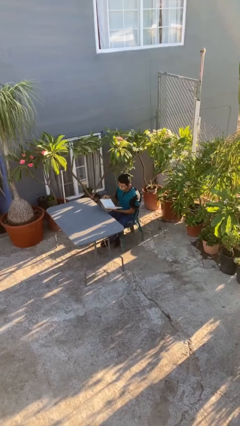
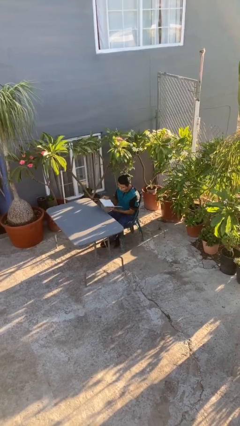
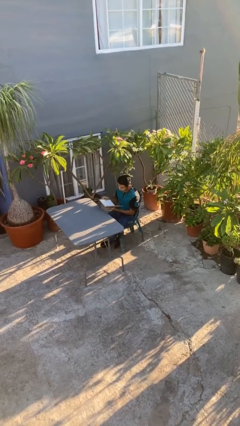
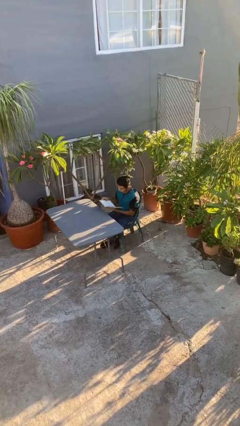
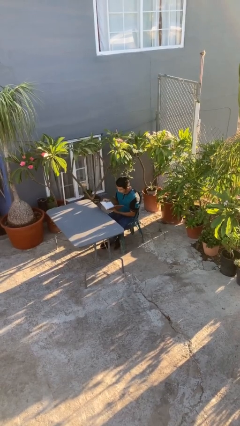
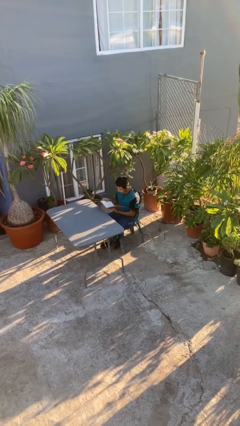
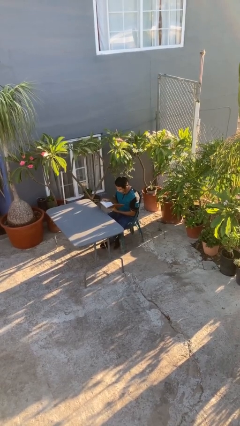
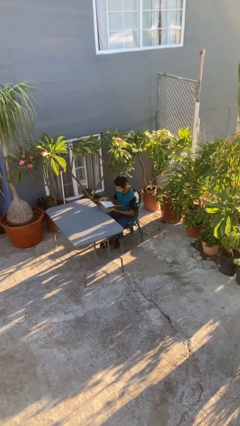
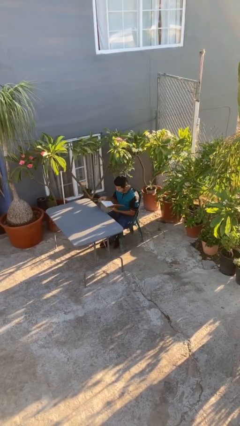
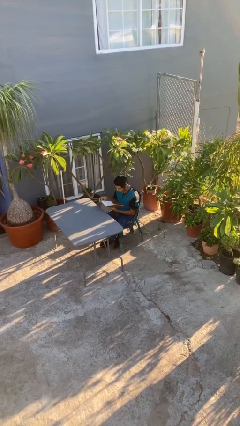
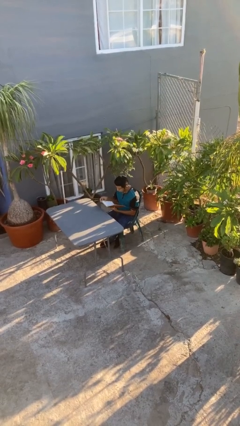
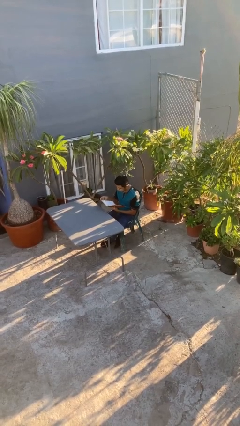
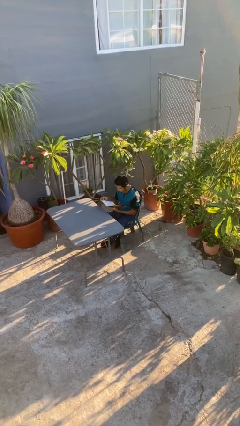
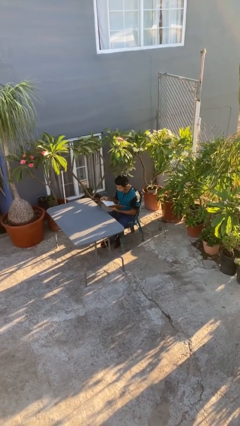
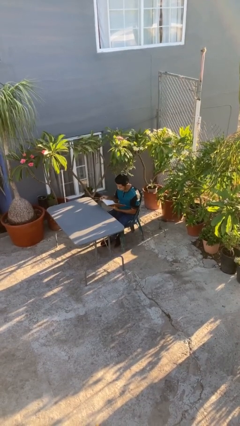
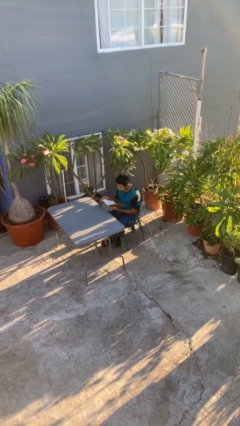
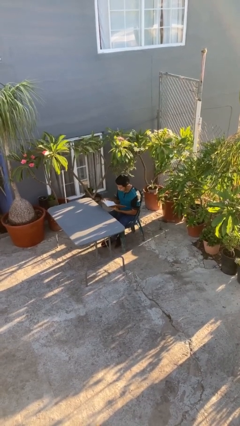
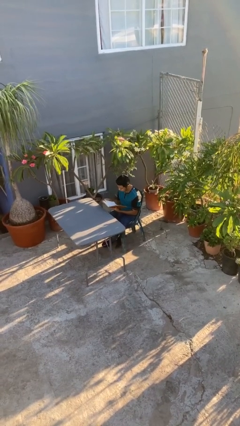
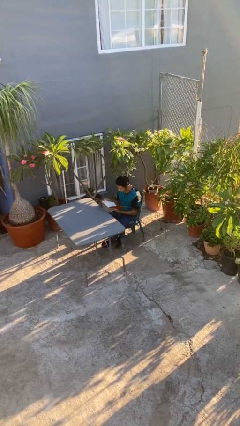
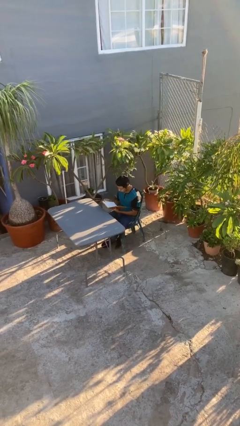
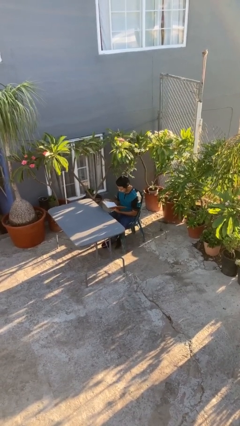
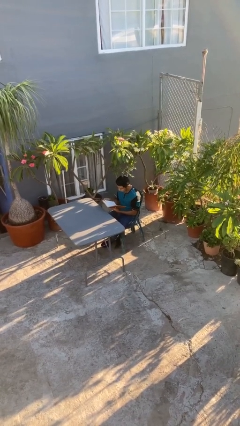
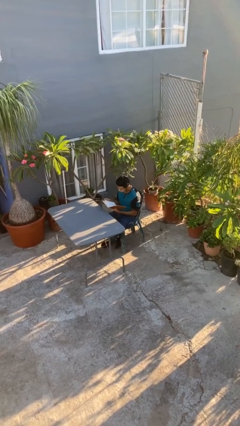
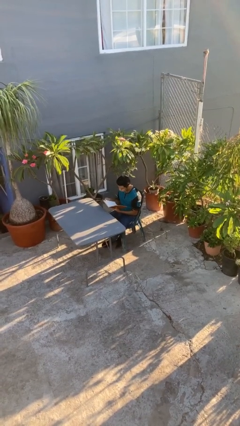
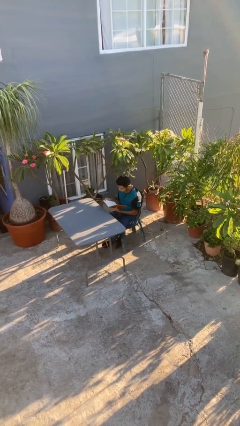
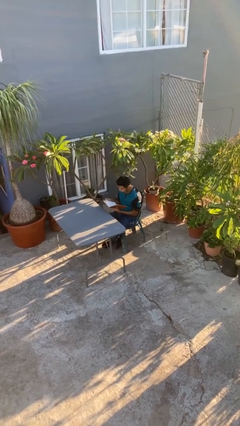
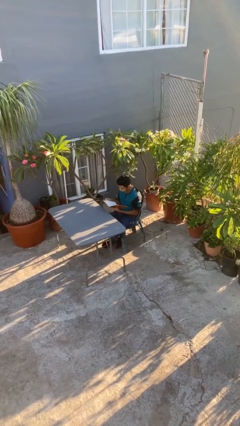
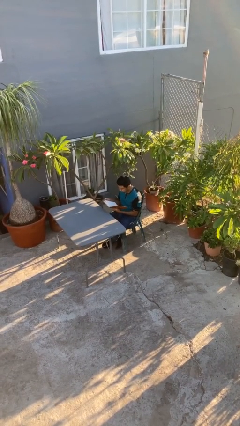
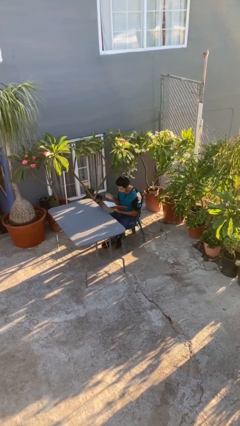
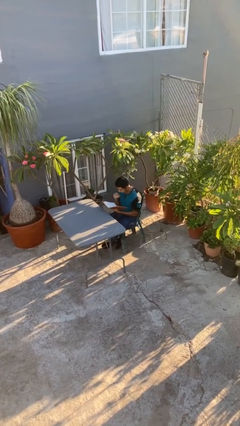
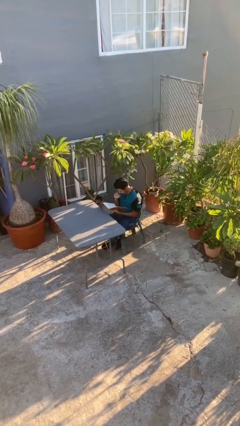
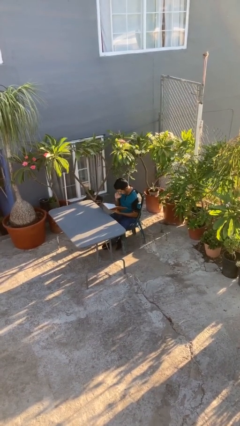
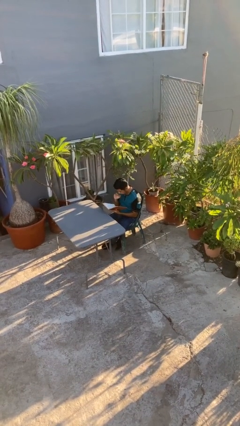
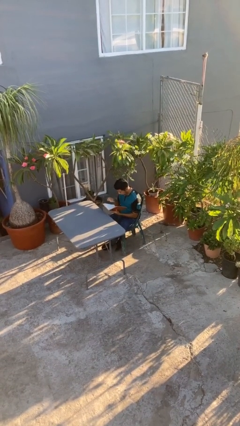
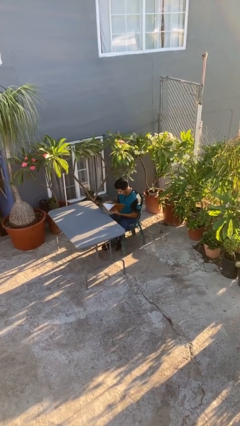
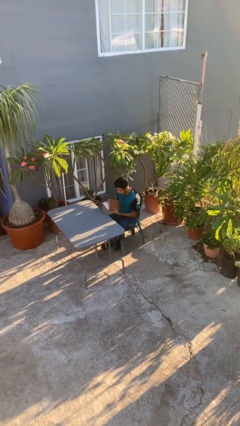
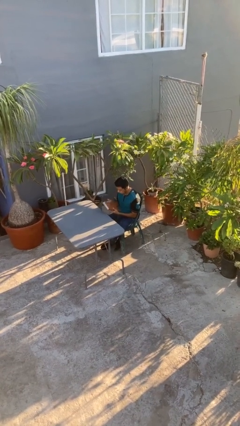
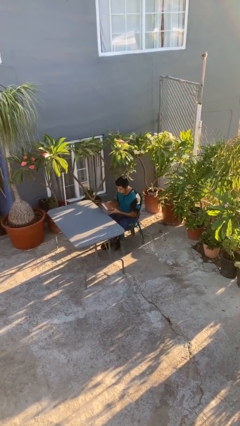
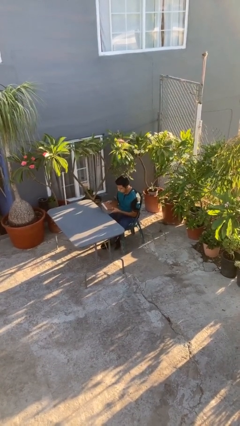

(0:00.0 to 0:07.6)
person reads document

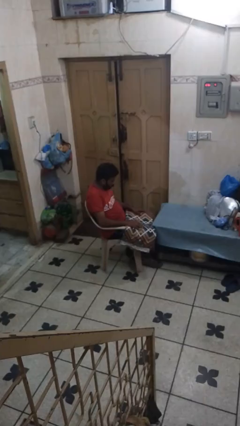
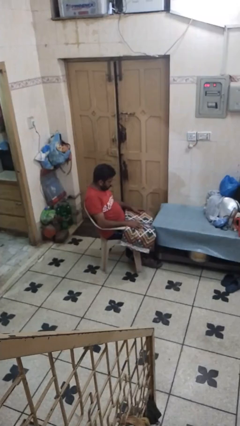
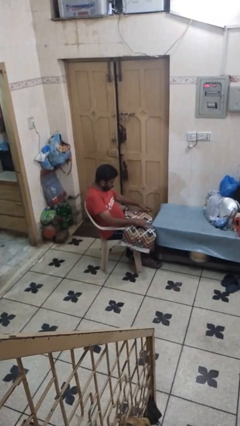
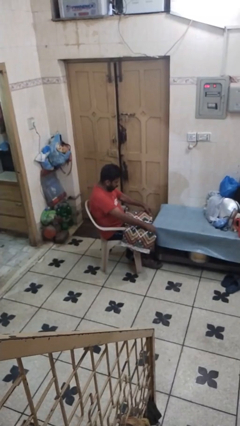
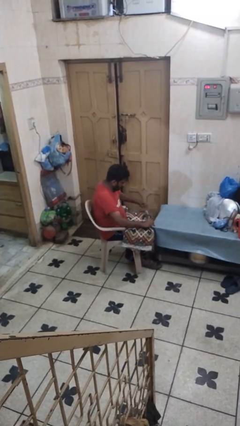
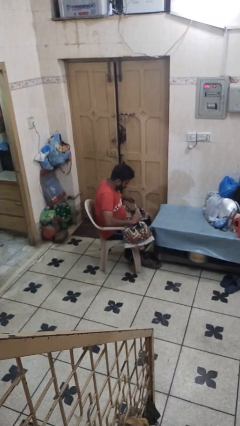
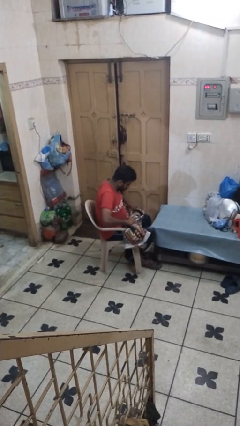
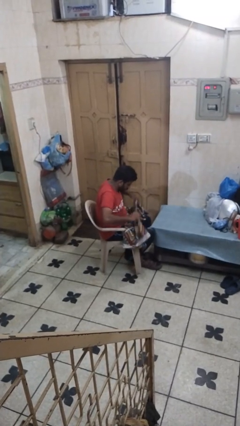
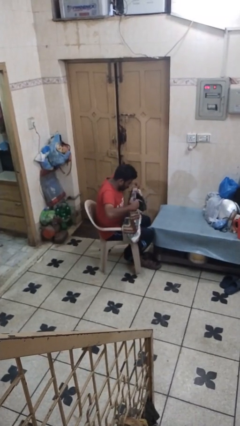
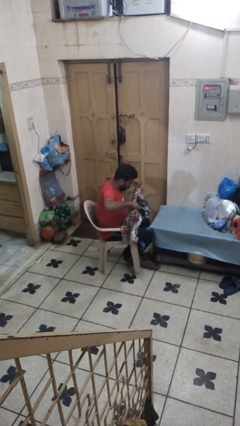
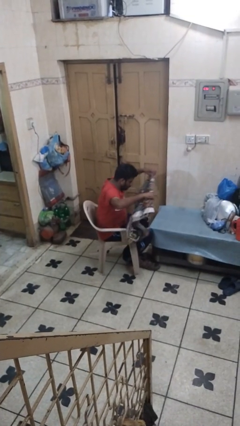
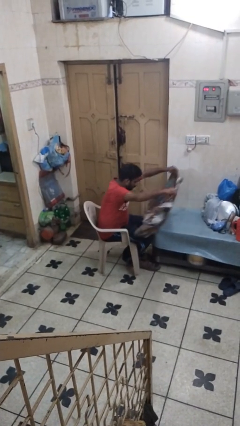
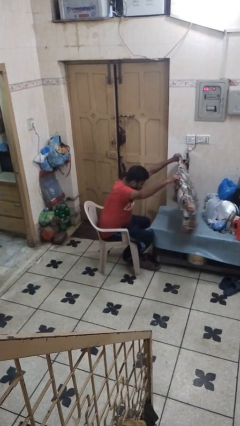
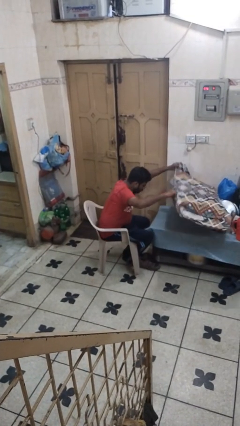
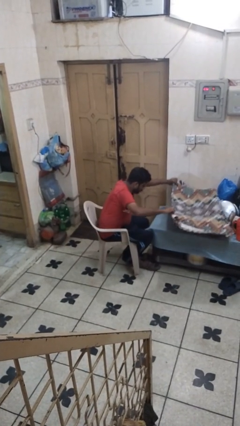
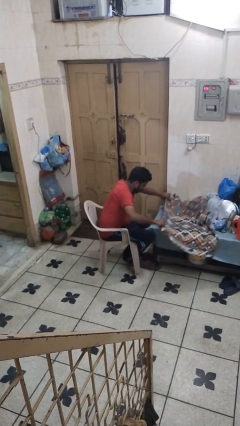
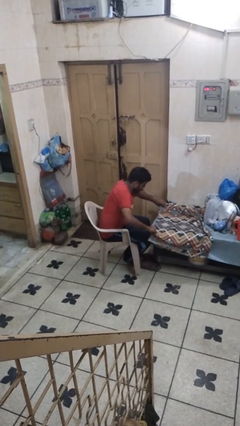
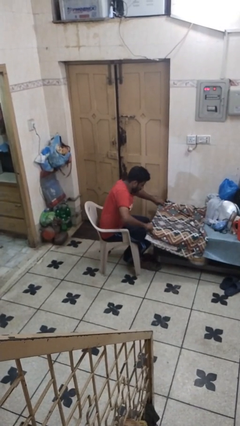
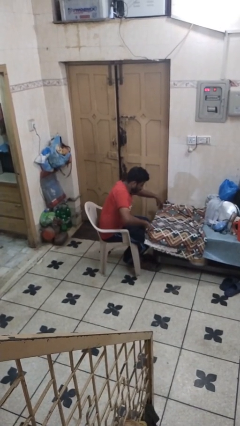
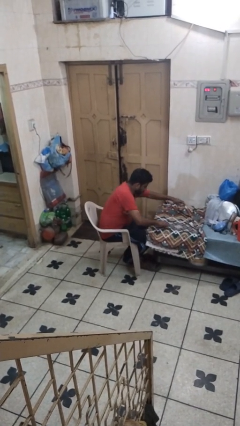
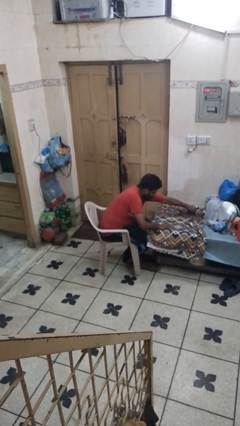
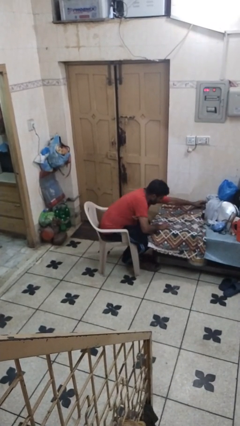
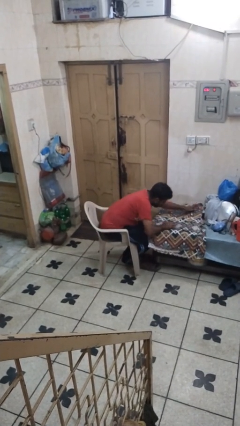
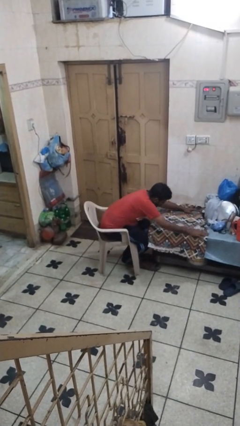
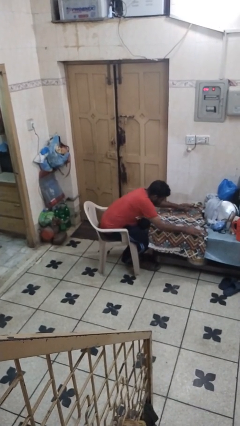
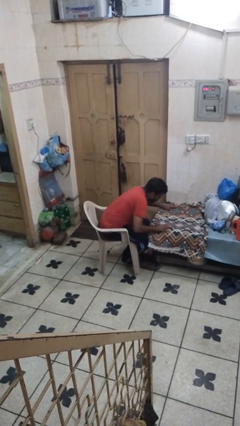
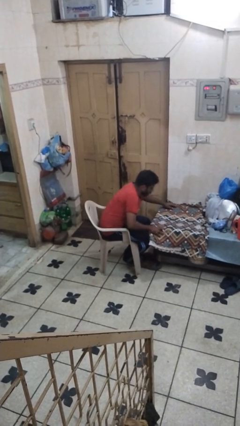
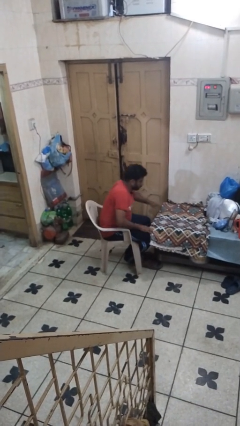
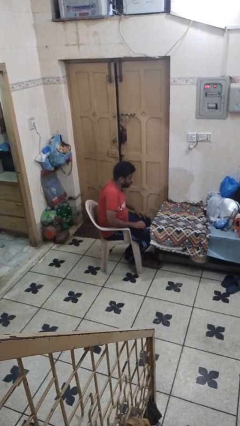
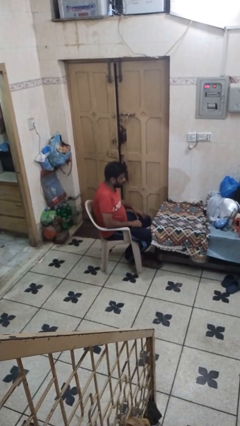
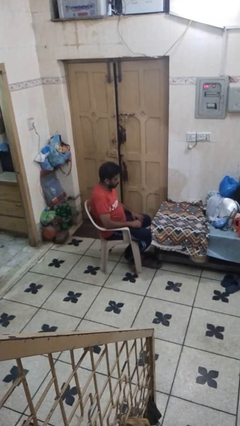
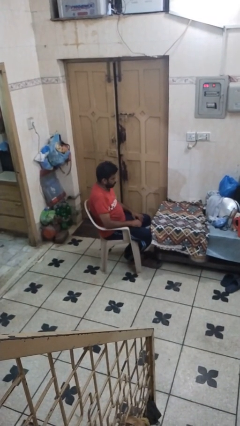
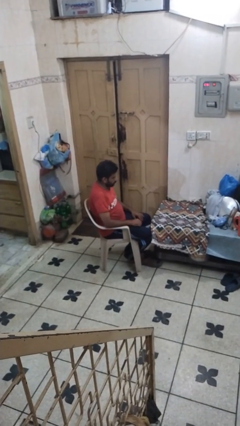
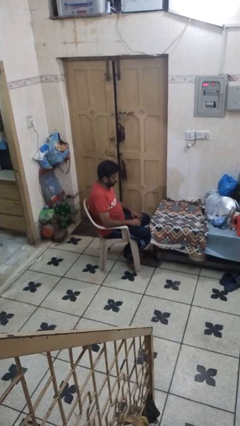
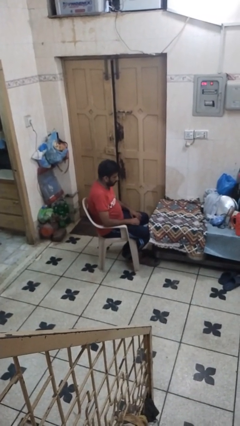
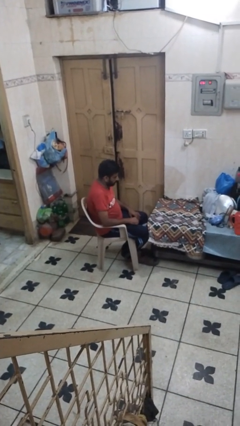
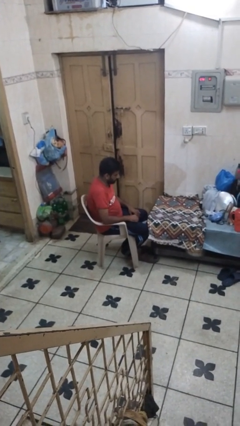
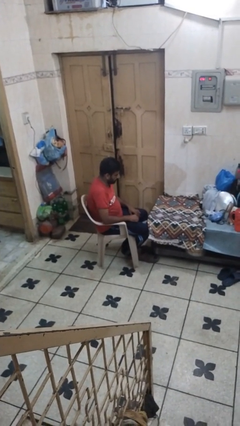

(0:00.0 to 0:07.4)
person spreads tablecloth

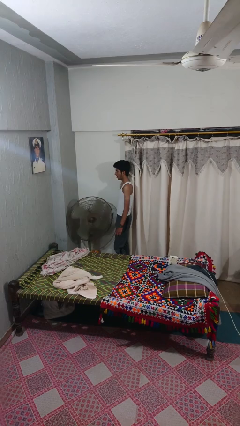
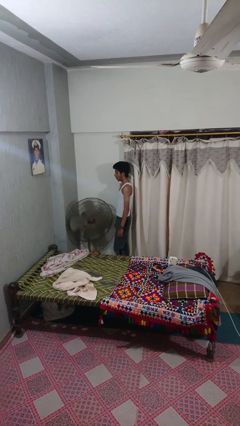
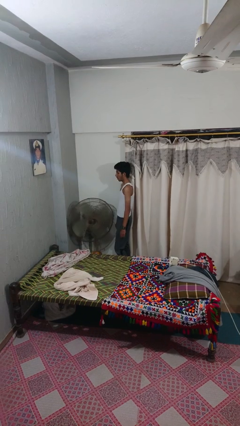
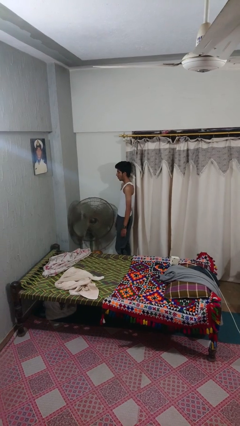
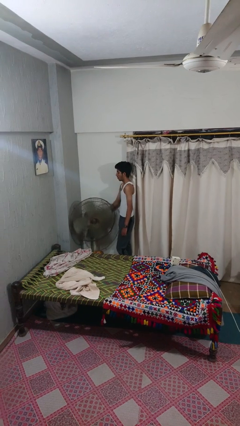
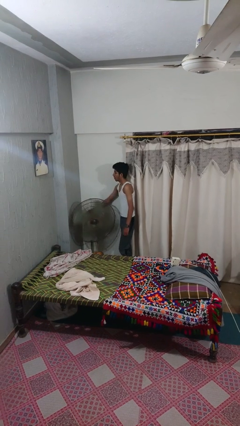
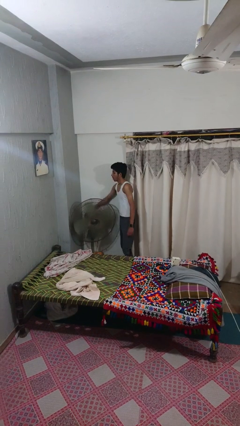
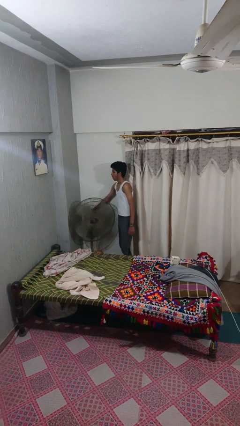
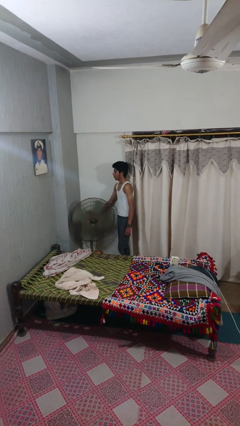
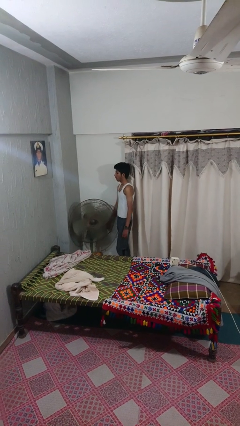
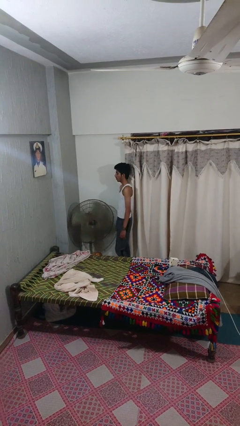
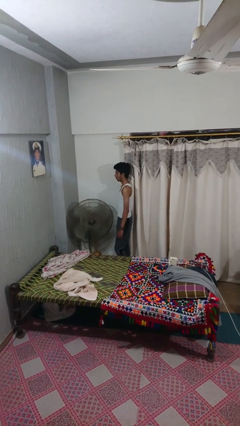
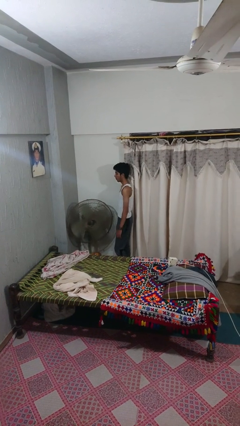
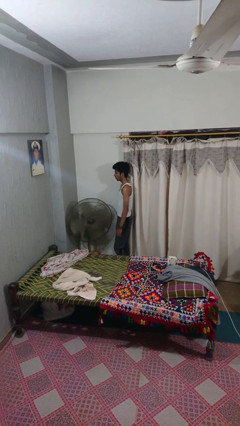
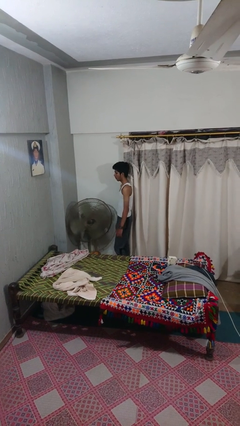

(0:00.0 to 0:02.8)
person turns off fan

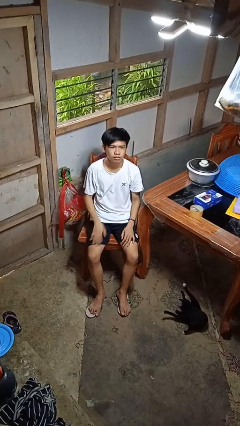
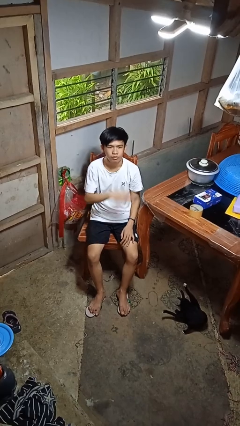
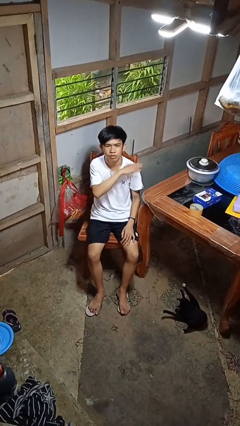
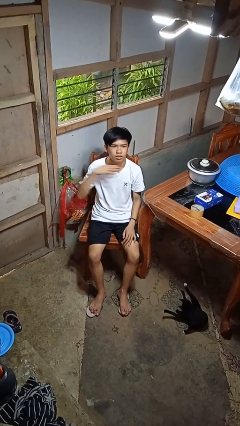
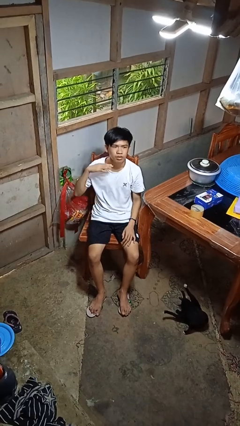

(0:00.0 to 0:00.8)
person gestures cut
